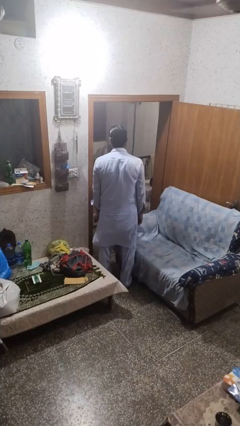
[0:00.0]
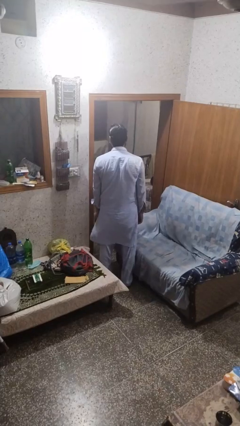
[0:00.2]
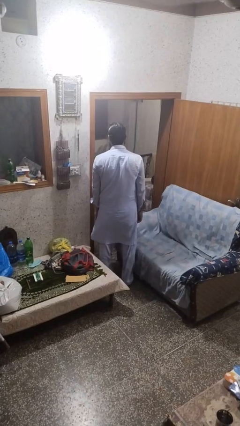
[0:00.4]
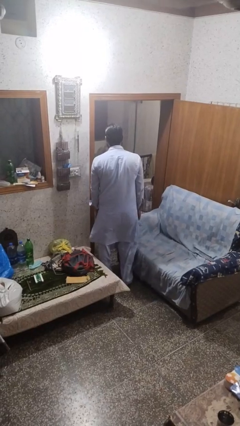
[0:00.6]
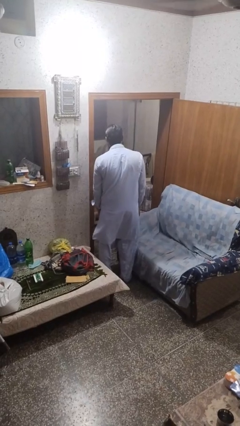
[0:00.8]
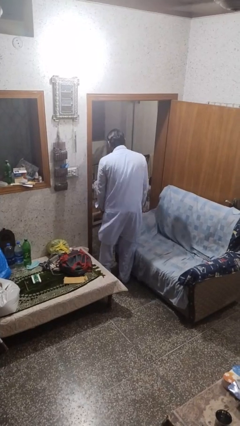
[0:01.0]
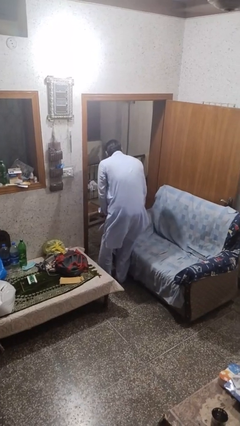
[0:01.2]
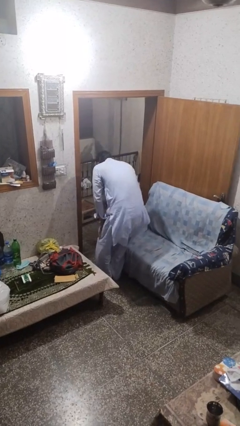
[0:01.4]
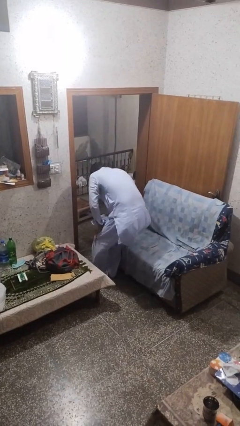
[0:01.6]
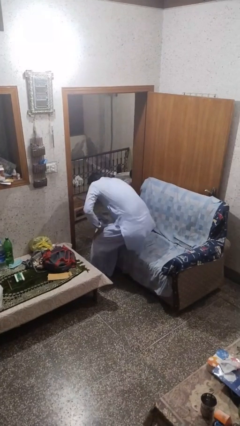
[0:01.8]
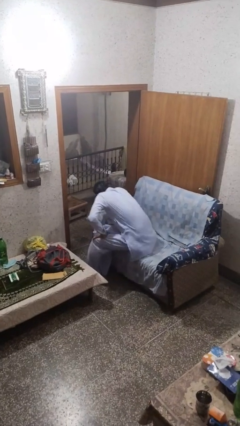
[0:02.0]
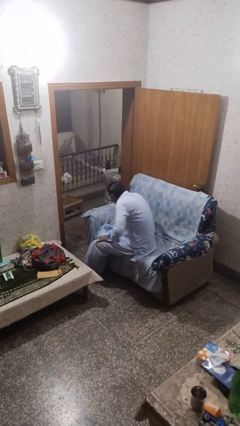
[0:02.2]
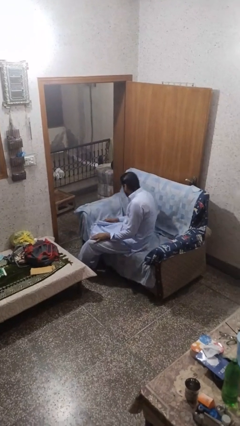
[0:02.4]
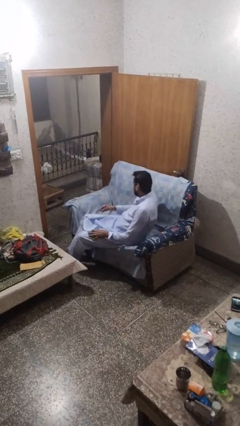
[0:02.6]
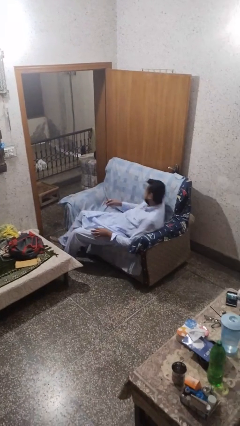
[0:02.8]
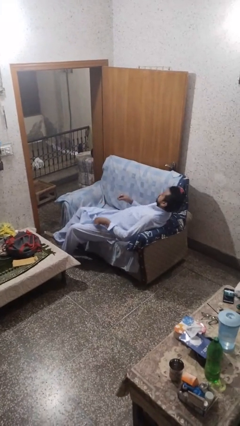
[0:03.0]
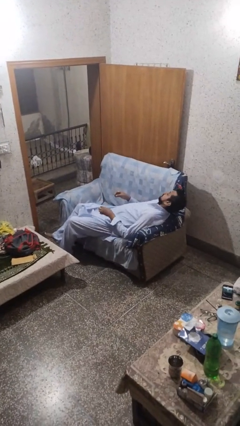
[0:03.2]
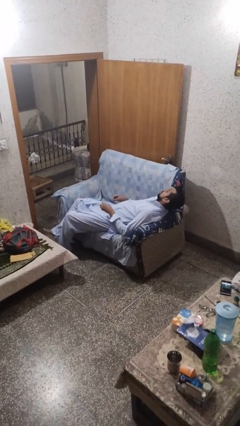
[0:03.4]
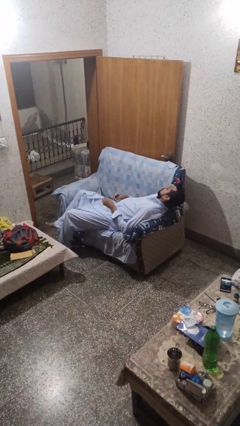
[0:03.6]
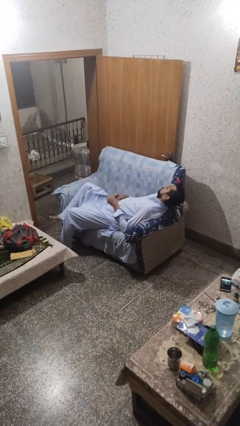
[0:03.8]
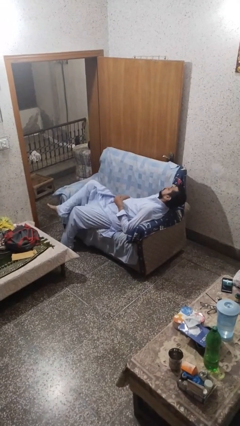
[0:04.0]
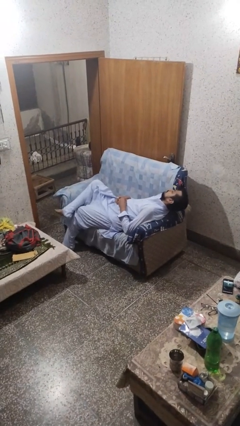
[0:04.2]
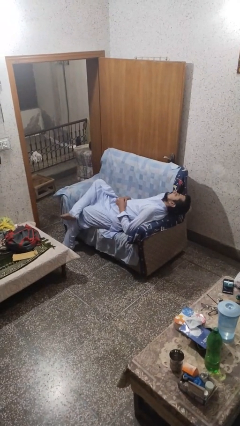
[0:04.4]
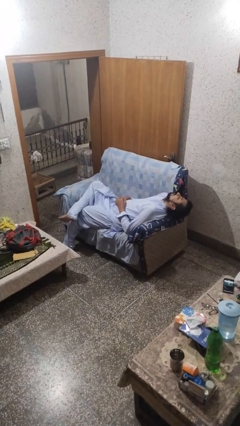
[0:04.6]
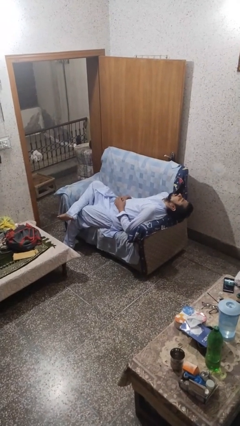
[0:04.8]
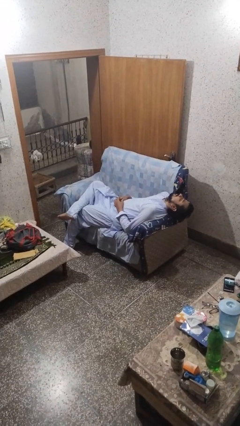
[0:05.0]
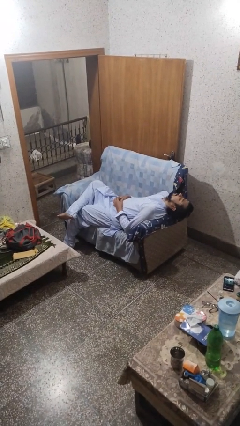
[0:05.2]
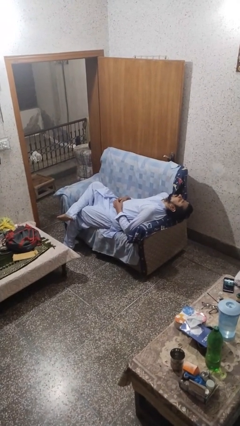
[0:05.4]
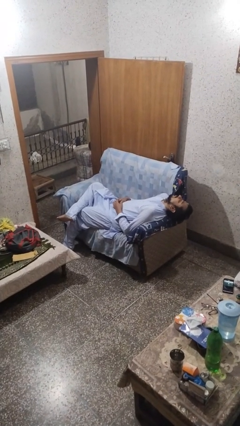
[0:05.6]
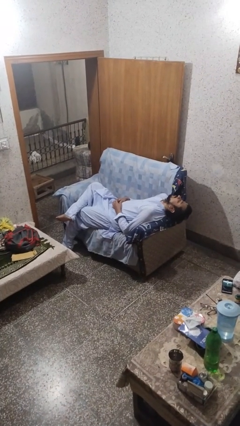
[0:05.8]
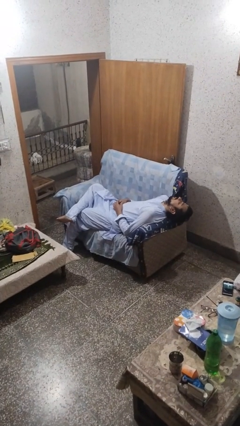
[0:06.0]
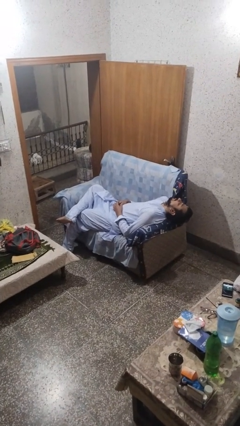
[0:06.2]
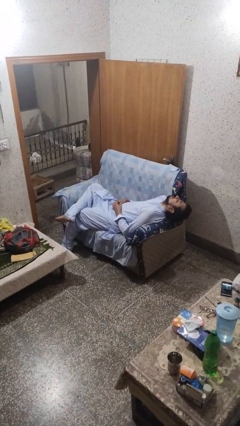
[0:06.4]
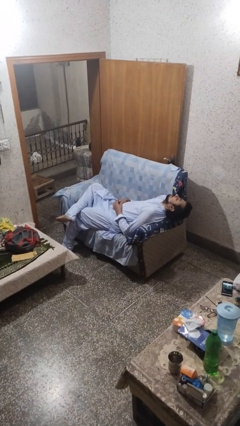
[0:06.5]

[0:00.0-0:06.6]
person lies down on couch

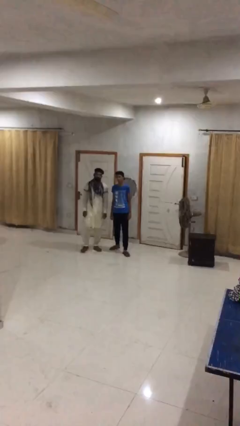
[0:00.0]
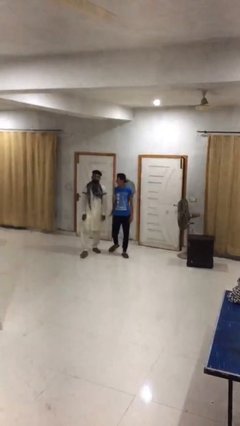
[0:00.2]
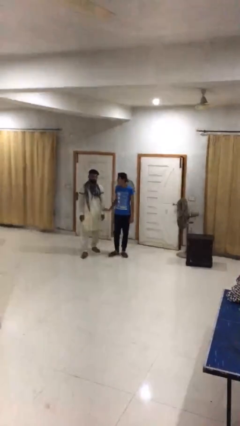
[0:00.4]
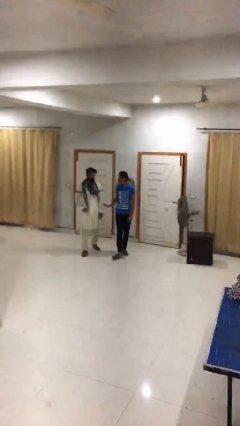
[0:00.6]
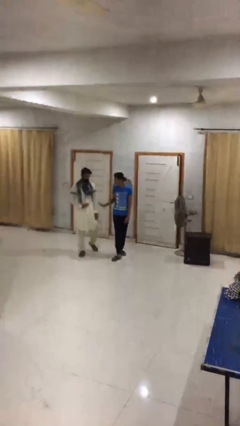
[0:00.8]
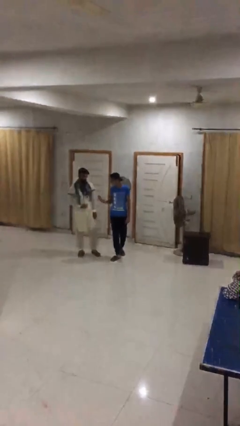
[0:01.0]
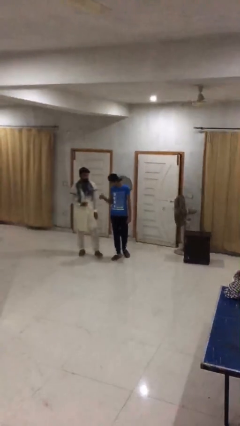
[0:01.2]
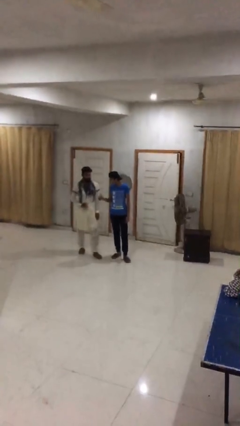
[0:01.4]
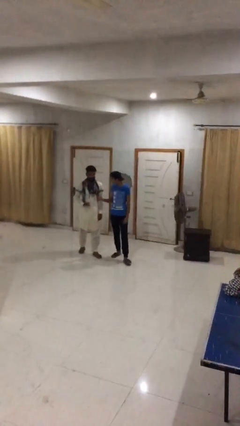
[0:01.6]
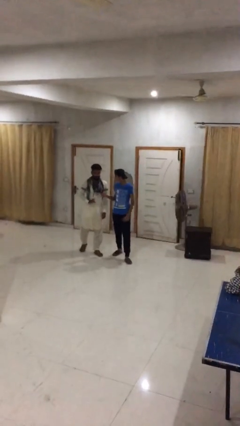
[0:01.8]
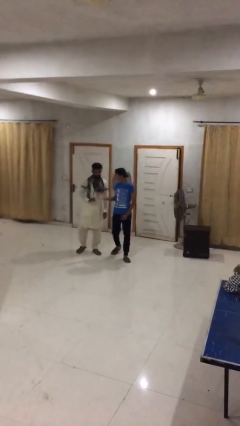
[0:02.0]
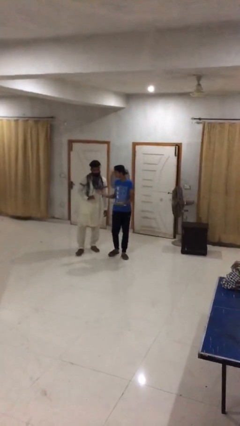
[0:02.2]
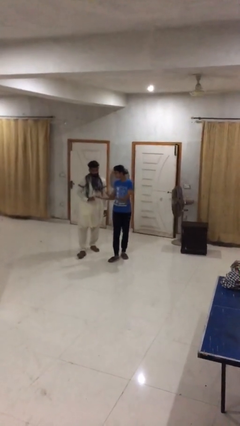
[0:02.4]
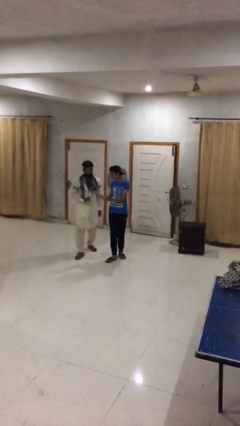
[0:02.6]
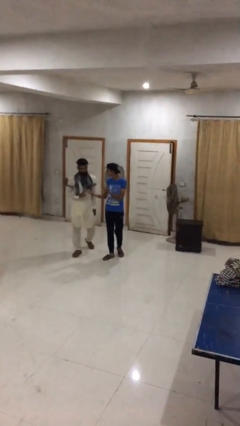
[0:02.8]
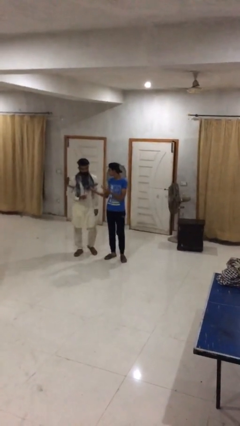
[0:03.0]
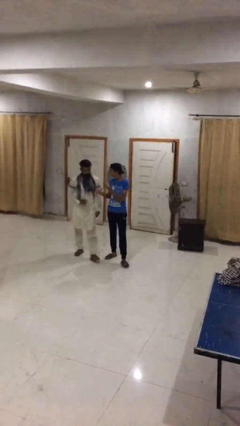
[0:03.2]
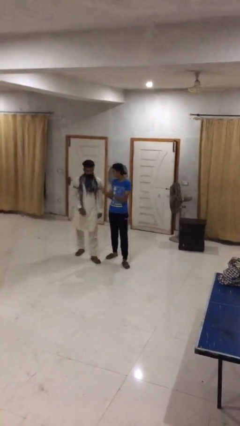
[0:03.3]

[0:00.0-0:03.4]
person talks to person

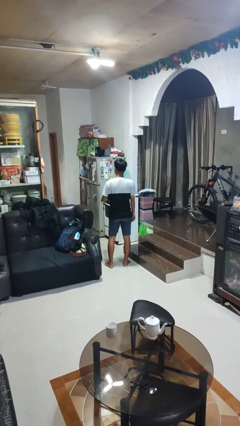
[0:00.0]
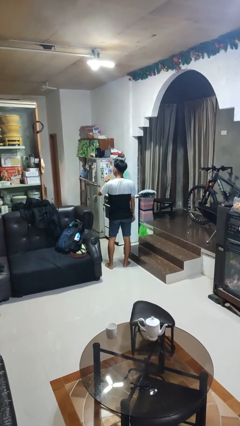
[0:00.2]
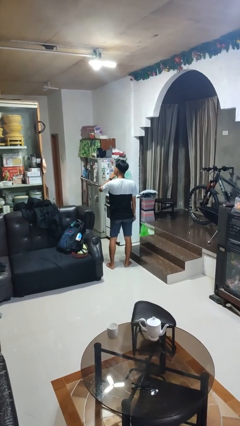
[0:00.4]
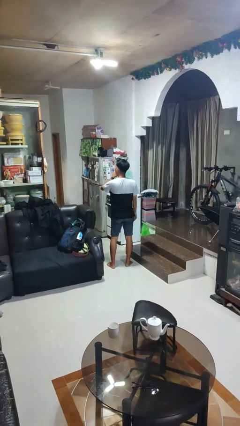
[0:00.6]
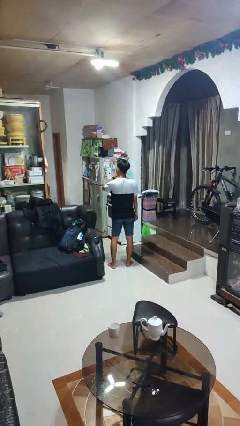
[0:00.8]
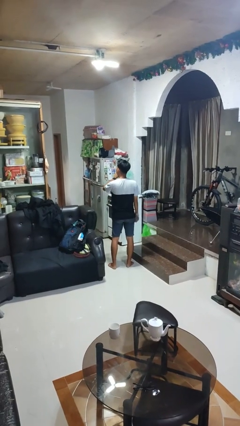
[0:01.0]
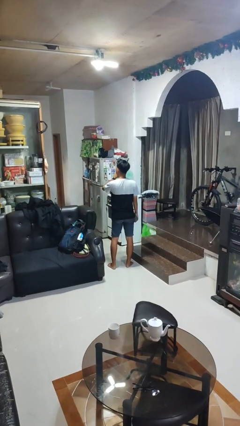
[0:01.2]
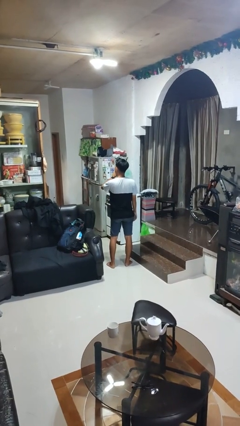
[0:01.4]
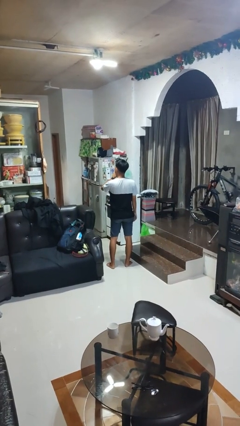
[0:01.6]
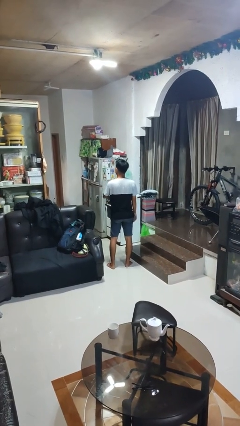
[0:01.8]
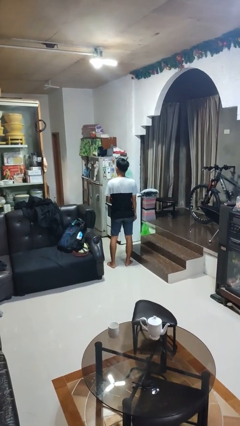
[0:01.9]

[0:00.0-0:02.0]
person gestures behind me

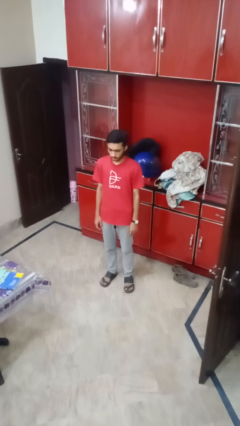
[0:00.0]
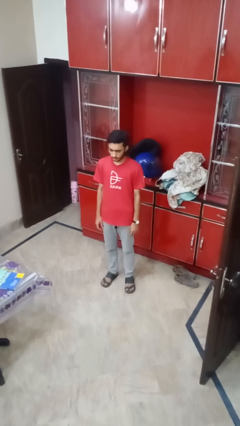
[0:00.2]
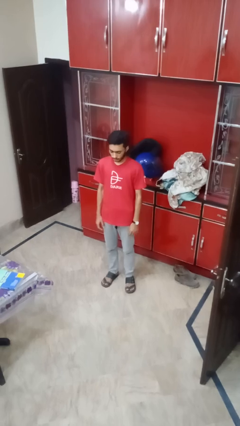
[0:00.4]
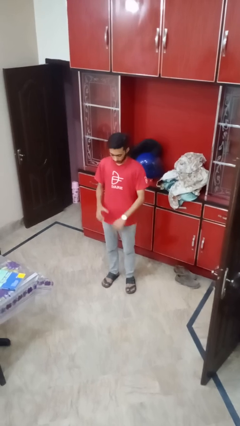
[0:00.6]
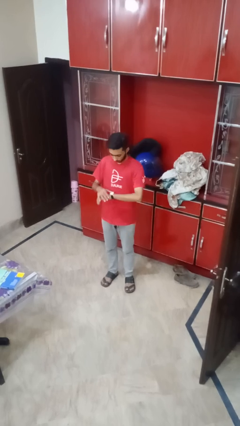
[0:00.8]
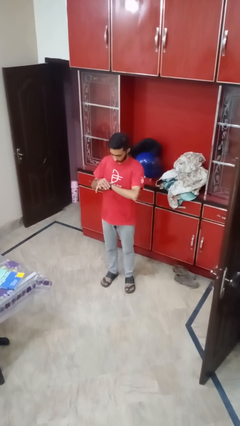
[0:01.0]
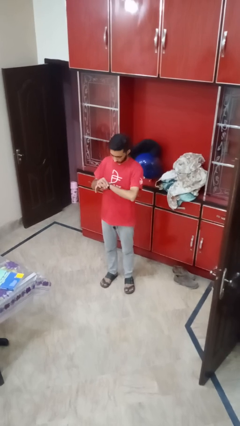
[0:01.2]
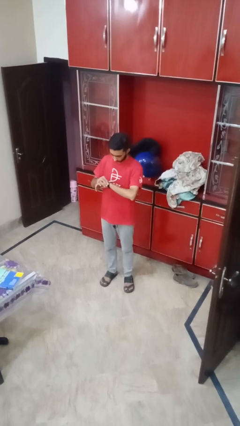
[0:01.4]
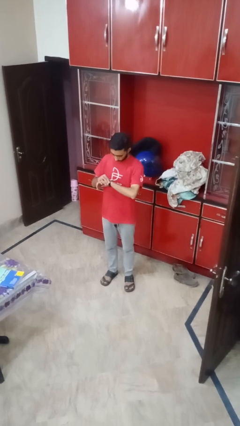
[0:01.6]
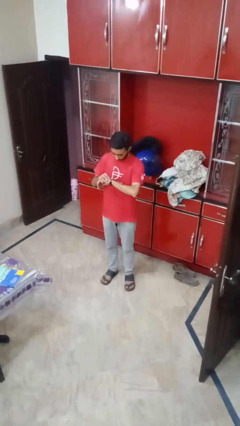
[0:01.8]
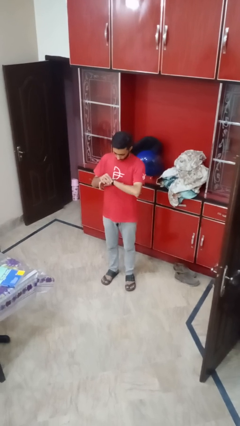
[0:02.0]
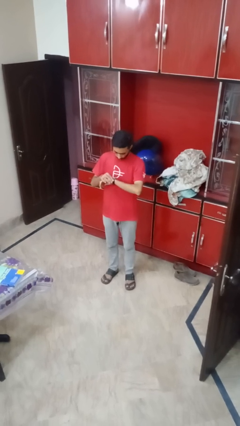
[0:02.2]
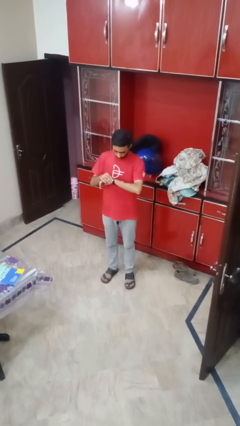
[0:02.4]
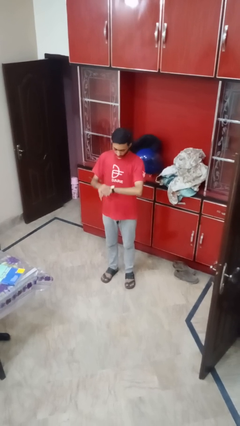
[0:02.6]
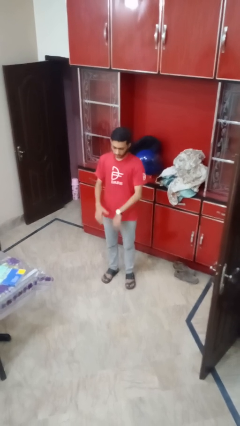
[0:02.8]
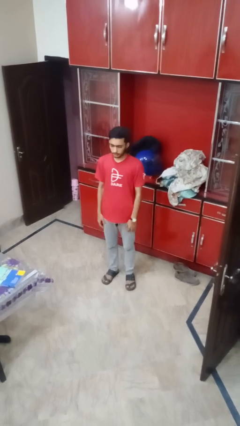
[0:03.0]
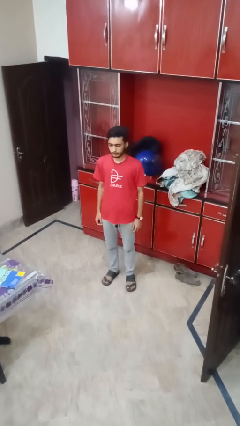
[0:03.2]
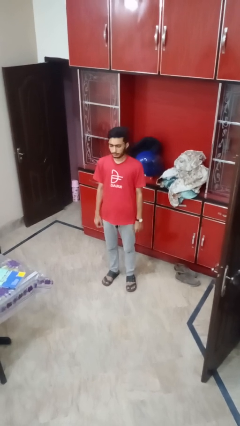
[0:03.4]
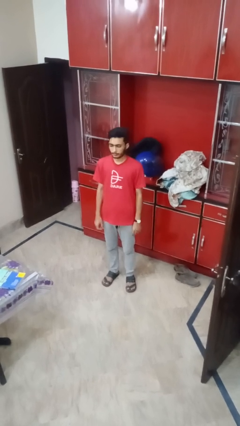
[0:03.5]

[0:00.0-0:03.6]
person looks at wristwatch

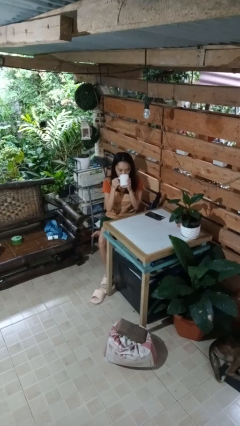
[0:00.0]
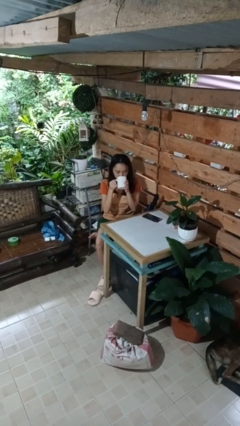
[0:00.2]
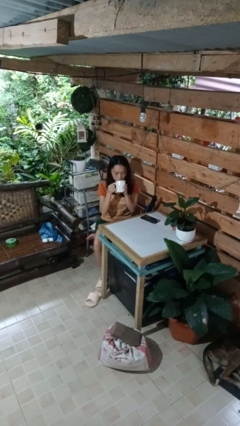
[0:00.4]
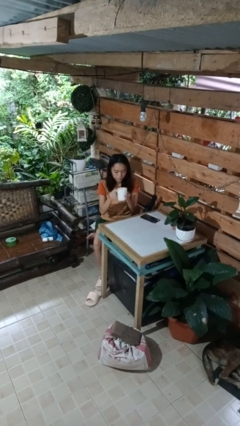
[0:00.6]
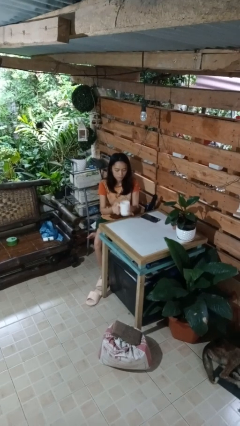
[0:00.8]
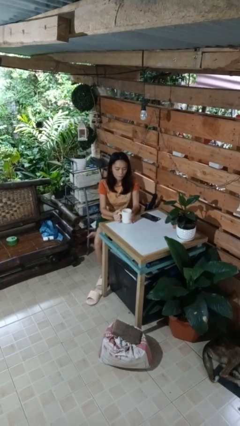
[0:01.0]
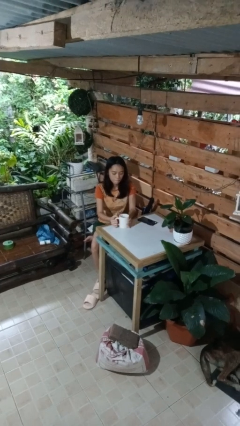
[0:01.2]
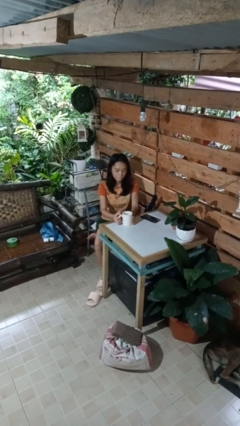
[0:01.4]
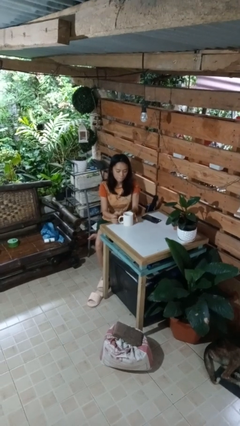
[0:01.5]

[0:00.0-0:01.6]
person puts down object on table

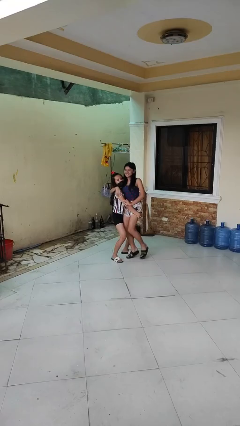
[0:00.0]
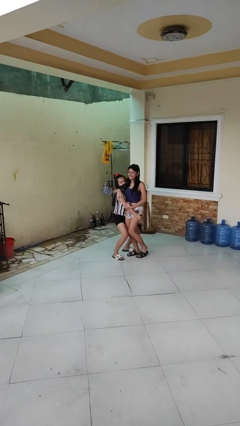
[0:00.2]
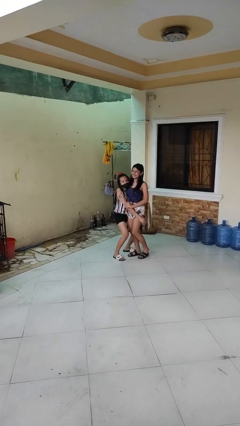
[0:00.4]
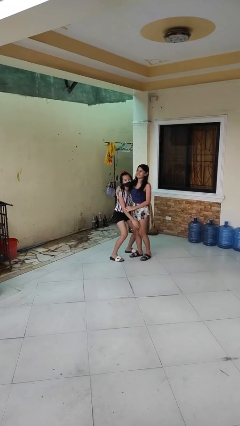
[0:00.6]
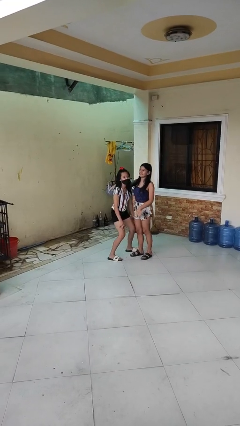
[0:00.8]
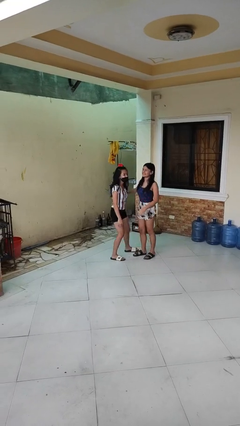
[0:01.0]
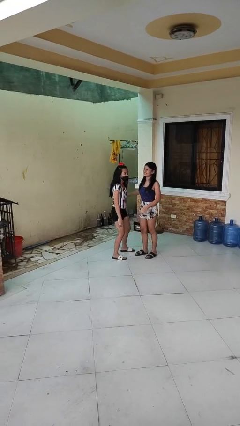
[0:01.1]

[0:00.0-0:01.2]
person puts down person
